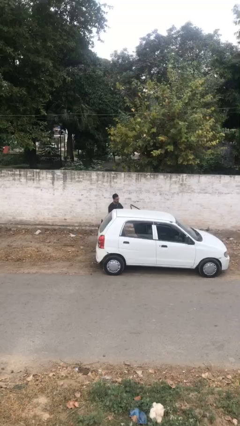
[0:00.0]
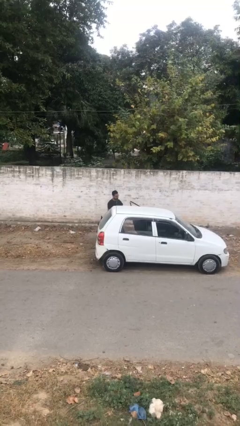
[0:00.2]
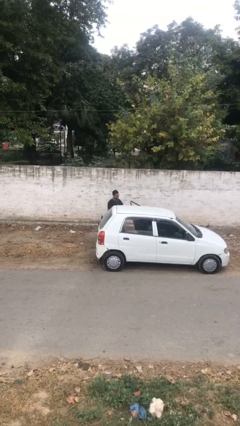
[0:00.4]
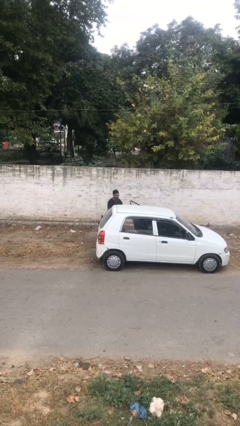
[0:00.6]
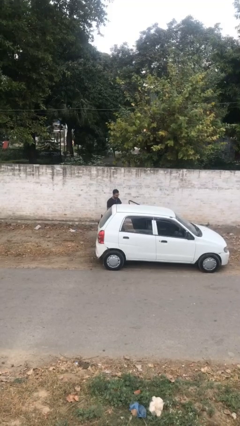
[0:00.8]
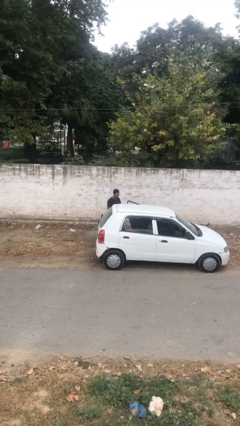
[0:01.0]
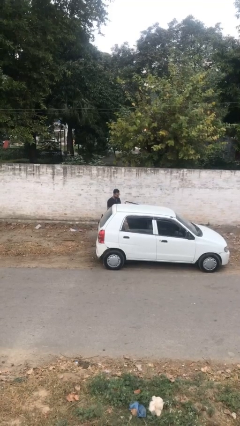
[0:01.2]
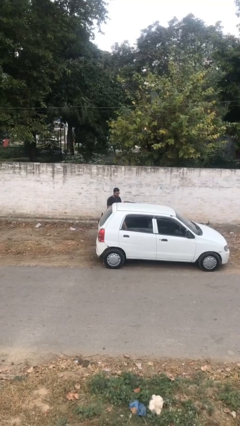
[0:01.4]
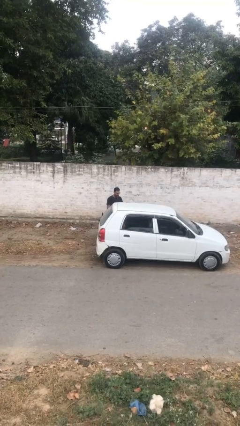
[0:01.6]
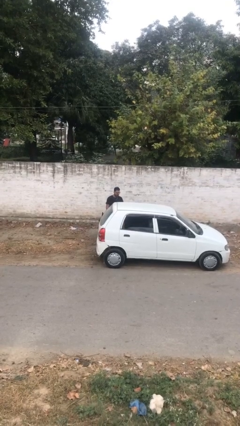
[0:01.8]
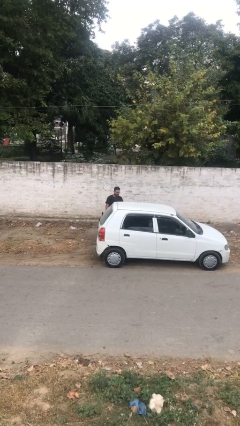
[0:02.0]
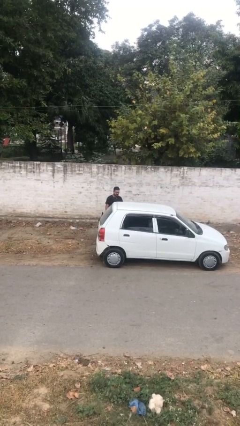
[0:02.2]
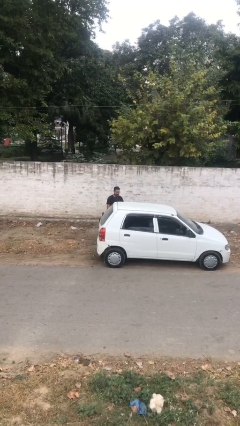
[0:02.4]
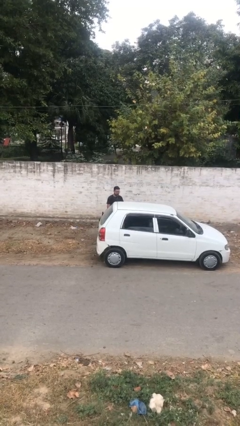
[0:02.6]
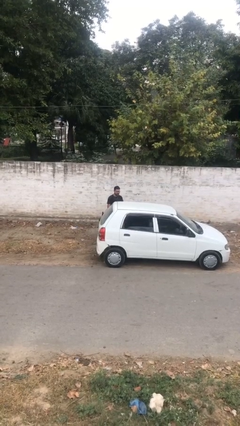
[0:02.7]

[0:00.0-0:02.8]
person closes car door

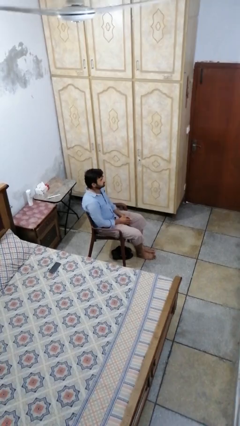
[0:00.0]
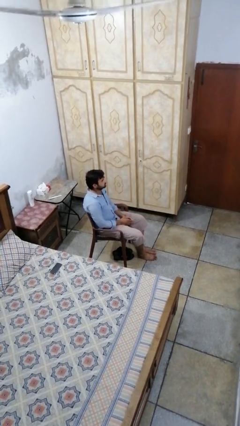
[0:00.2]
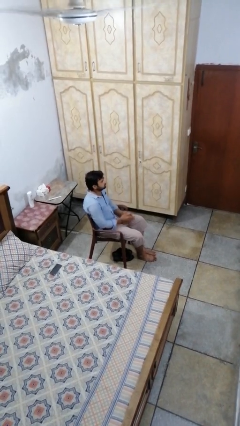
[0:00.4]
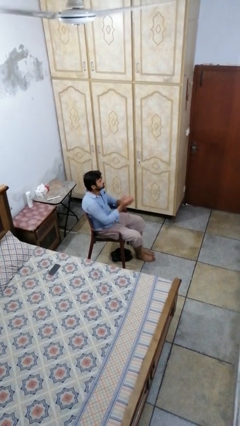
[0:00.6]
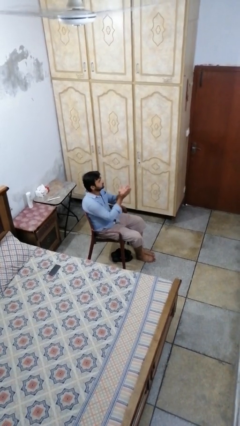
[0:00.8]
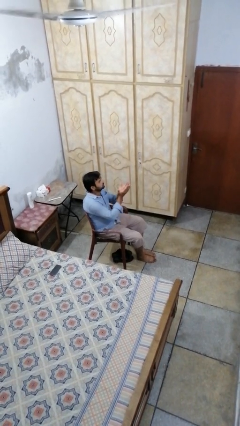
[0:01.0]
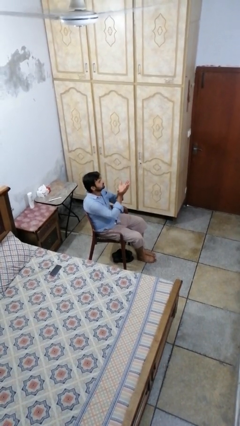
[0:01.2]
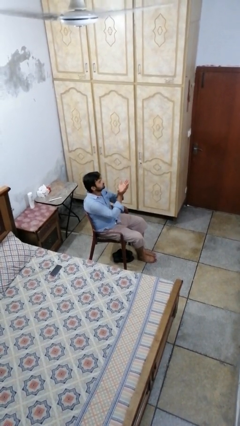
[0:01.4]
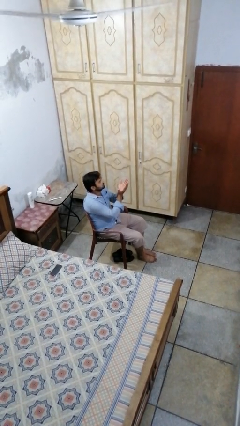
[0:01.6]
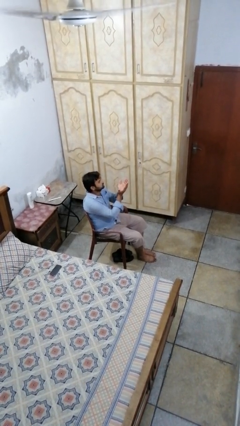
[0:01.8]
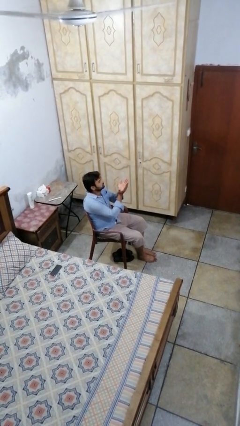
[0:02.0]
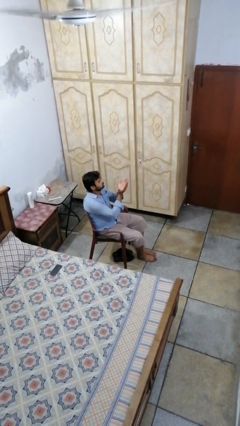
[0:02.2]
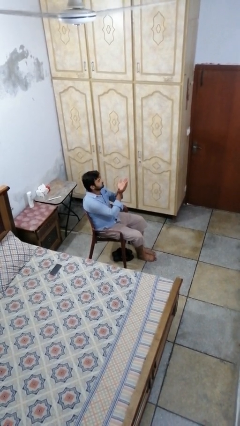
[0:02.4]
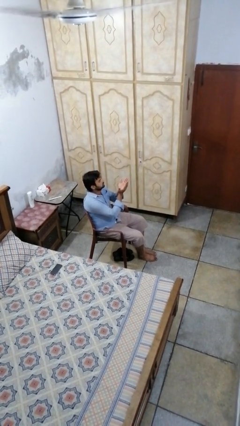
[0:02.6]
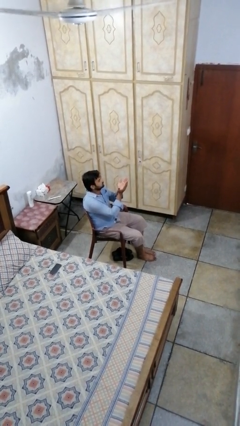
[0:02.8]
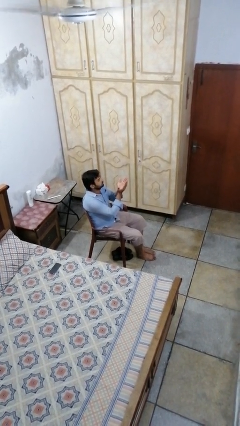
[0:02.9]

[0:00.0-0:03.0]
person prays

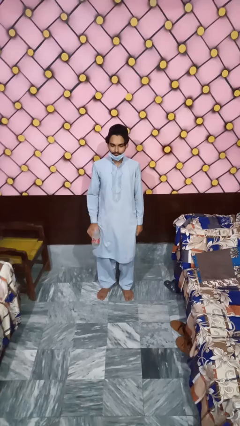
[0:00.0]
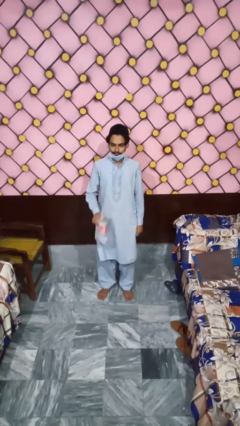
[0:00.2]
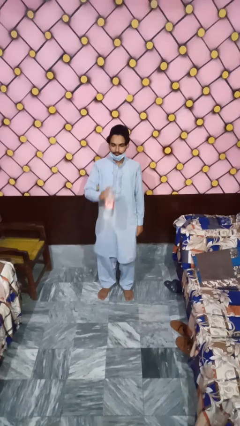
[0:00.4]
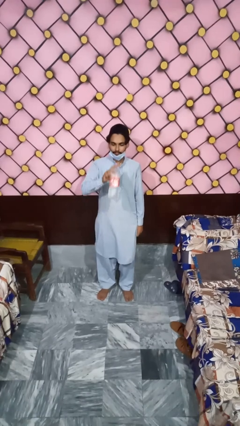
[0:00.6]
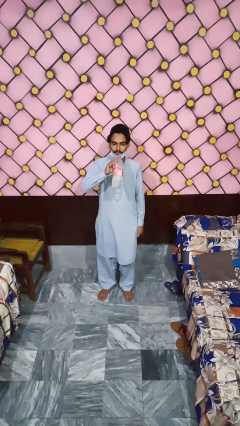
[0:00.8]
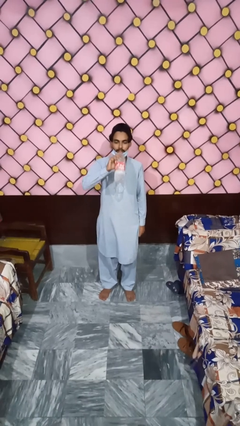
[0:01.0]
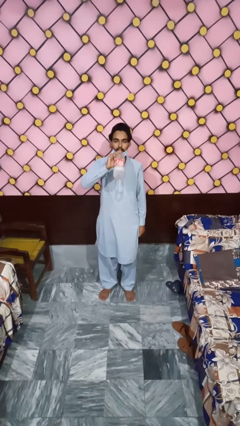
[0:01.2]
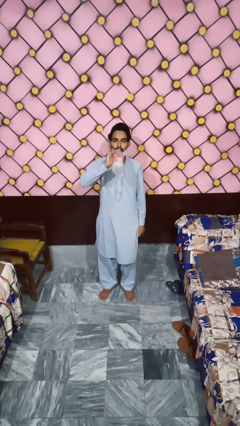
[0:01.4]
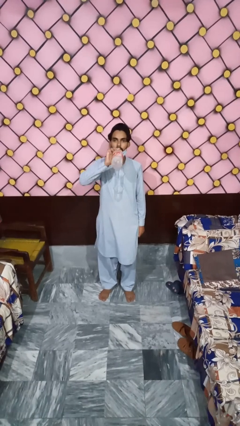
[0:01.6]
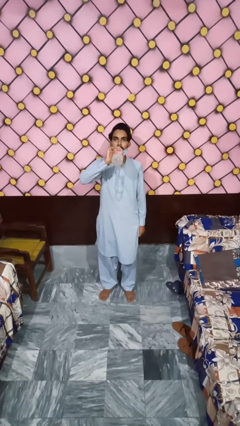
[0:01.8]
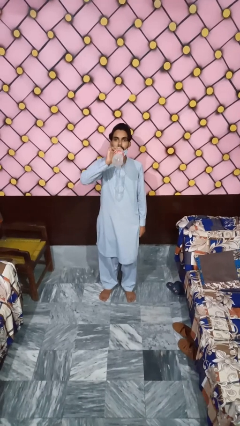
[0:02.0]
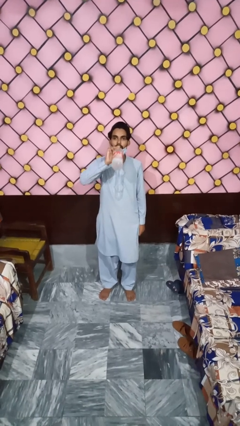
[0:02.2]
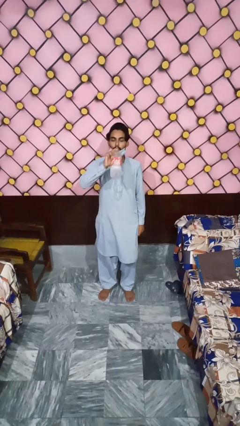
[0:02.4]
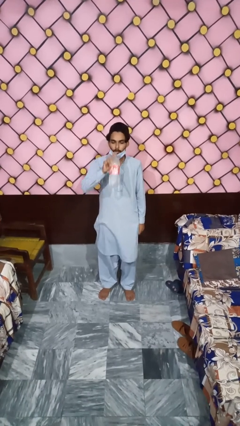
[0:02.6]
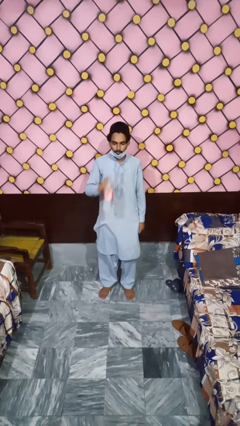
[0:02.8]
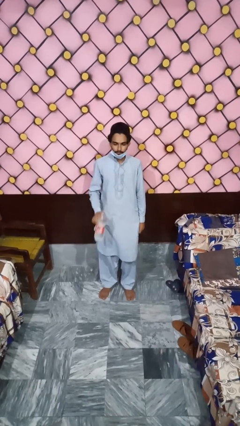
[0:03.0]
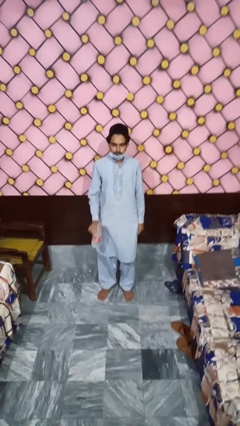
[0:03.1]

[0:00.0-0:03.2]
person drinks from bottle

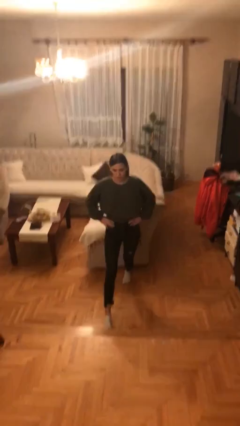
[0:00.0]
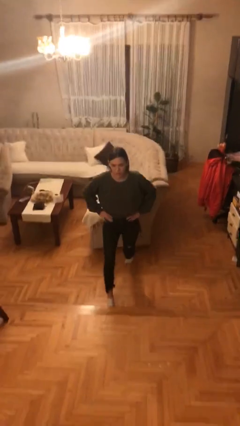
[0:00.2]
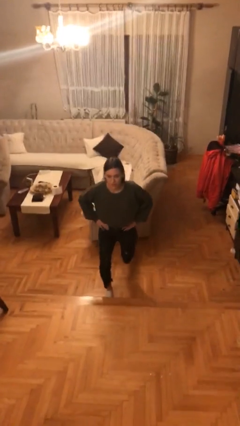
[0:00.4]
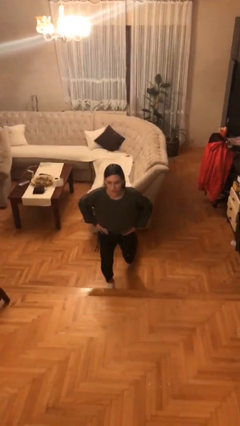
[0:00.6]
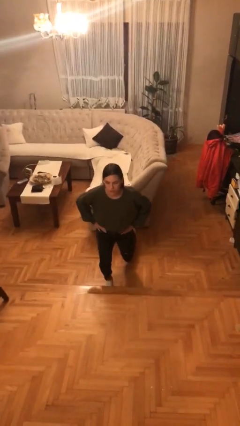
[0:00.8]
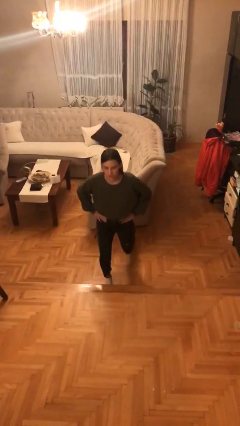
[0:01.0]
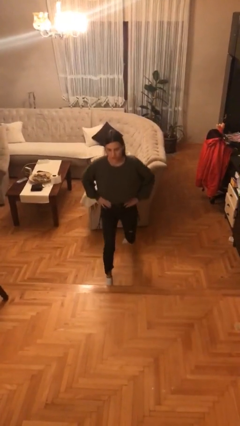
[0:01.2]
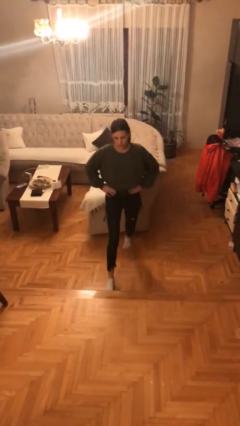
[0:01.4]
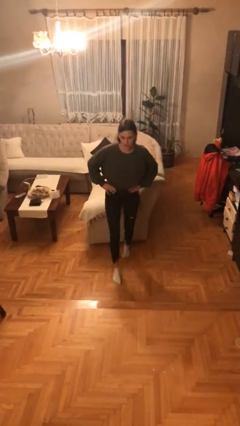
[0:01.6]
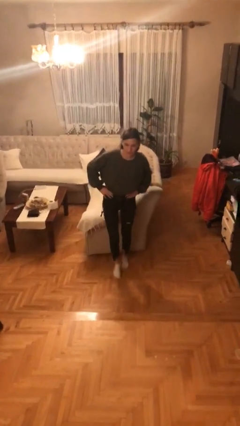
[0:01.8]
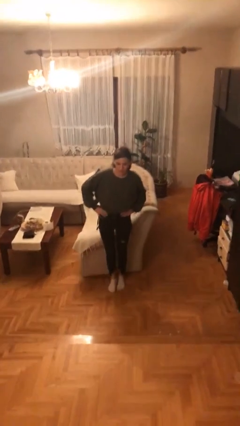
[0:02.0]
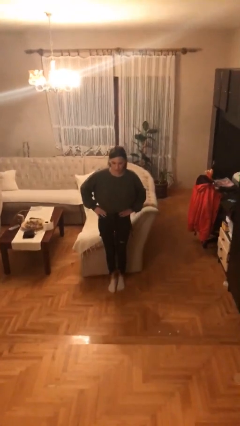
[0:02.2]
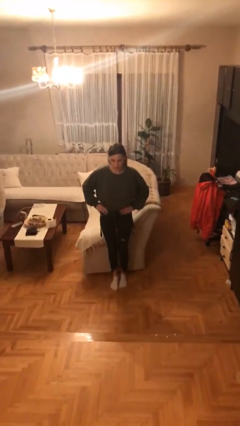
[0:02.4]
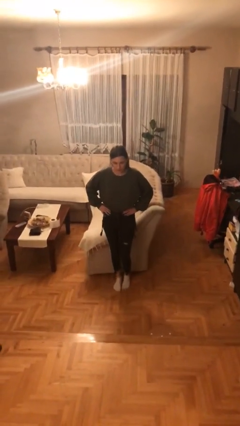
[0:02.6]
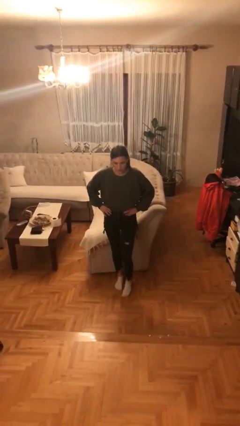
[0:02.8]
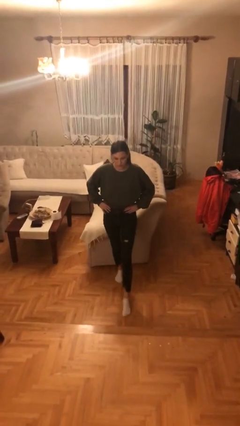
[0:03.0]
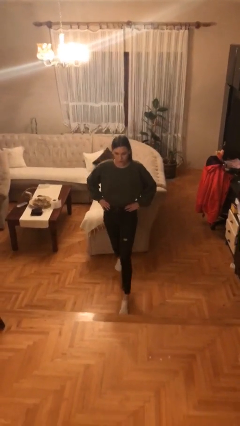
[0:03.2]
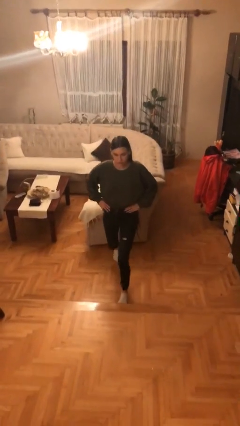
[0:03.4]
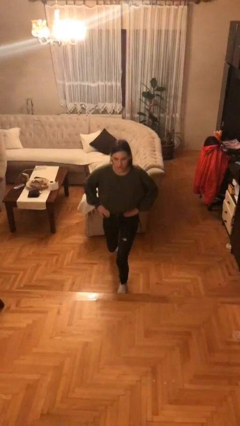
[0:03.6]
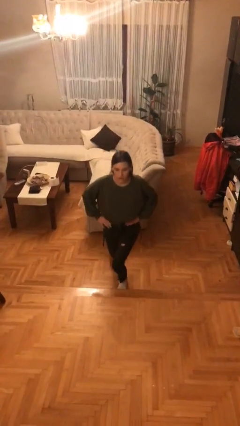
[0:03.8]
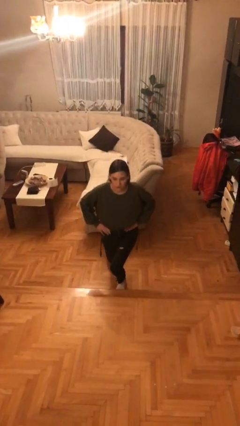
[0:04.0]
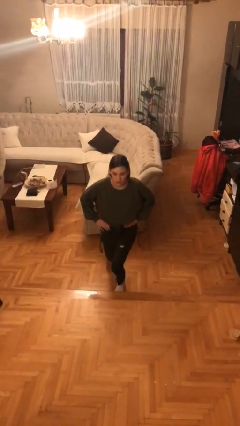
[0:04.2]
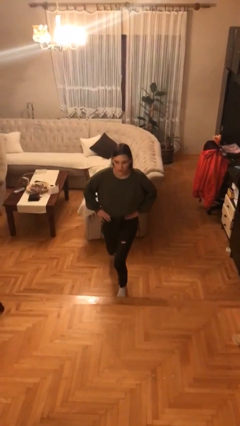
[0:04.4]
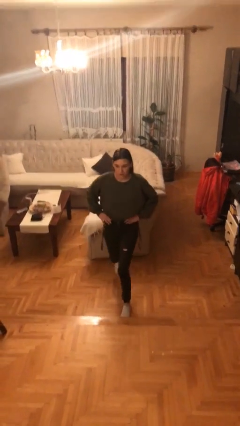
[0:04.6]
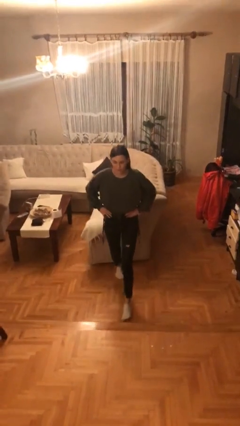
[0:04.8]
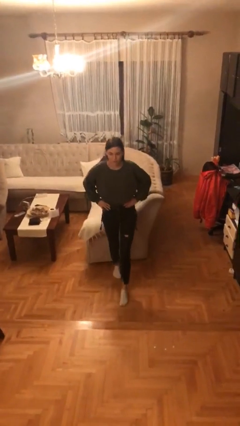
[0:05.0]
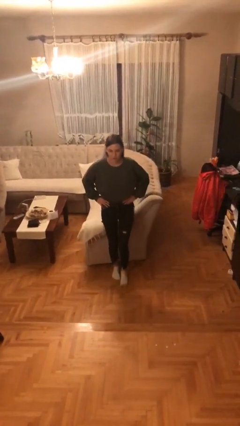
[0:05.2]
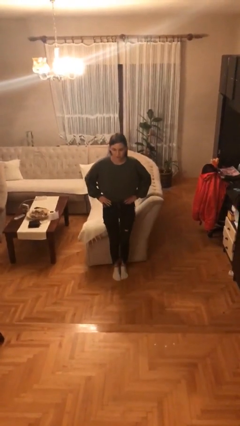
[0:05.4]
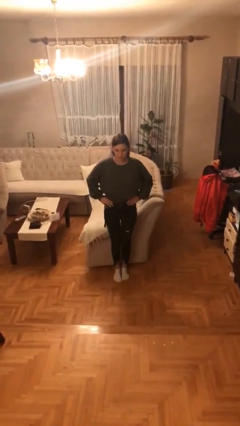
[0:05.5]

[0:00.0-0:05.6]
person exercises with lunges

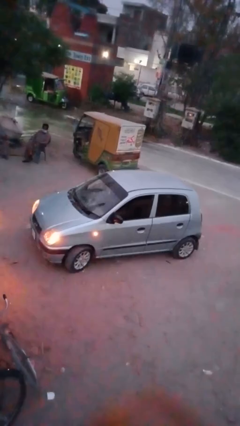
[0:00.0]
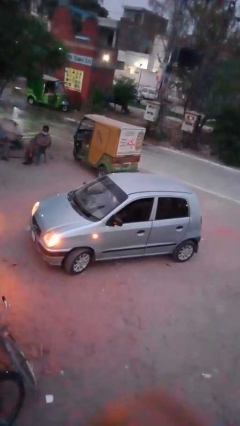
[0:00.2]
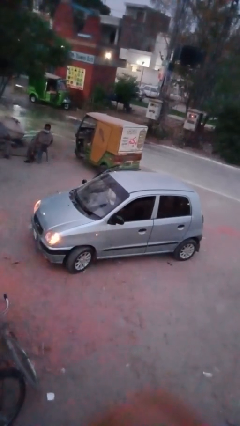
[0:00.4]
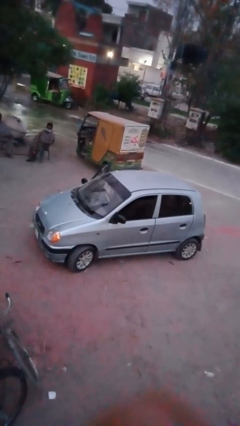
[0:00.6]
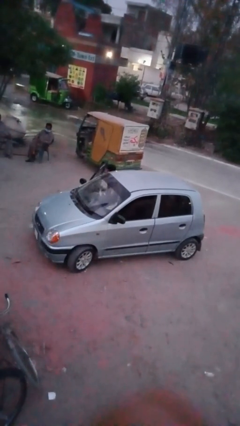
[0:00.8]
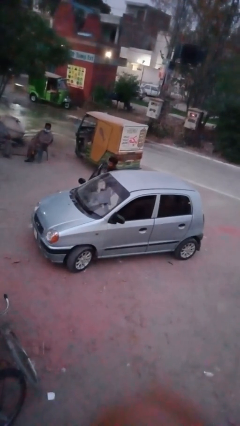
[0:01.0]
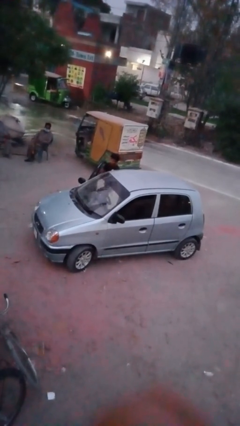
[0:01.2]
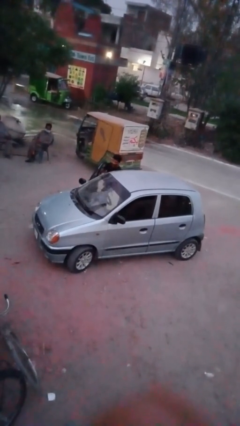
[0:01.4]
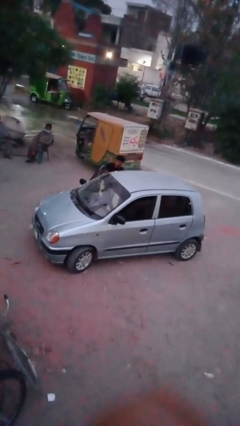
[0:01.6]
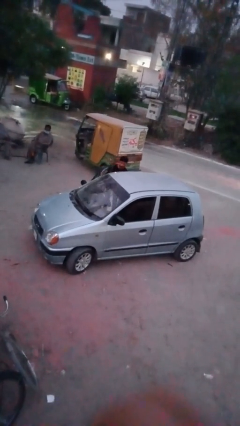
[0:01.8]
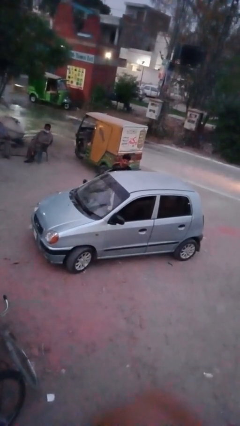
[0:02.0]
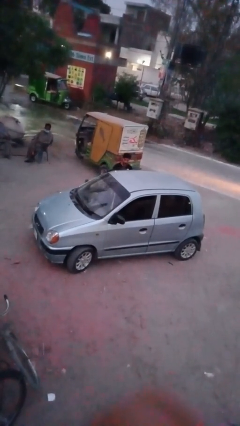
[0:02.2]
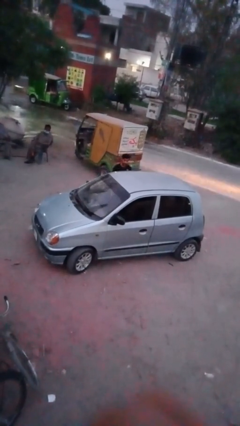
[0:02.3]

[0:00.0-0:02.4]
car drops off person

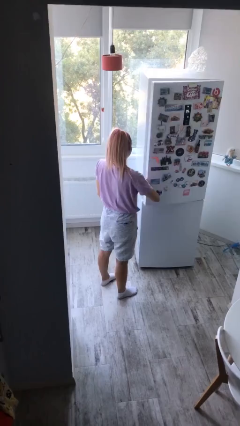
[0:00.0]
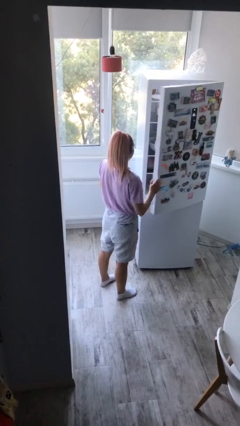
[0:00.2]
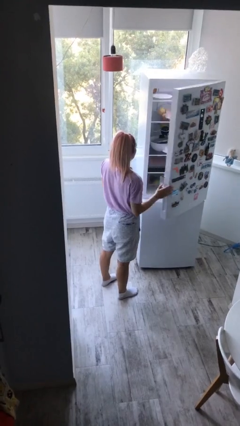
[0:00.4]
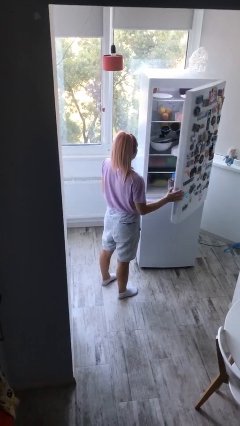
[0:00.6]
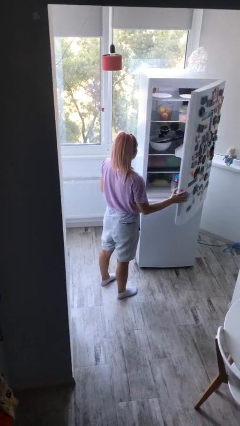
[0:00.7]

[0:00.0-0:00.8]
person opens refrigerator
